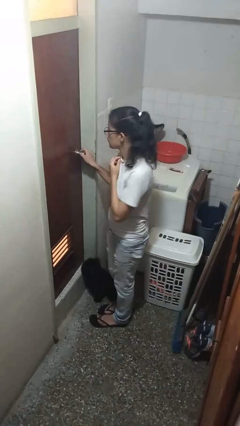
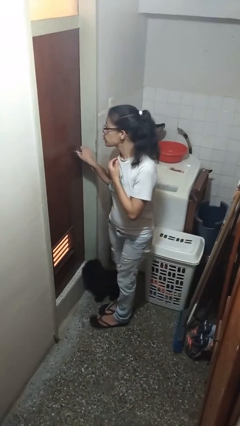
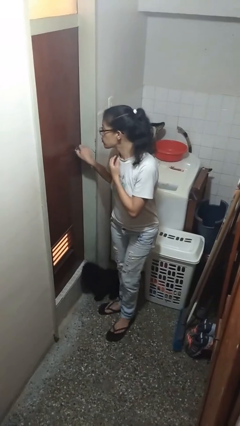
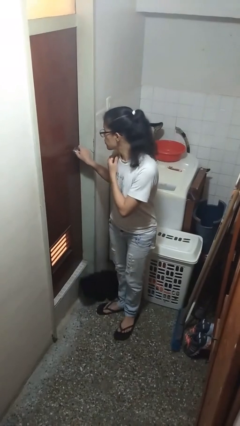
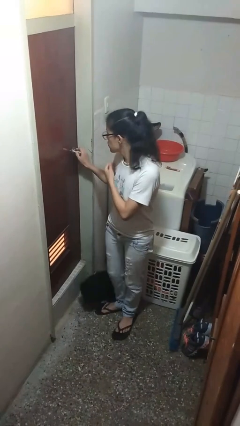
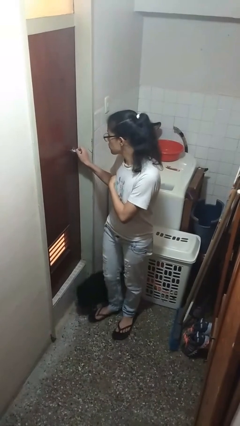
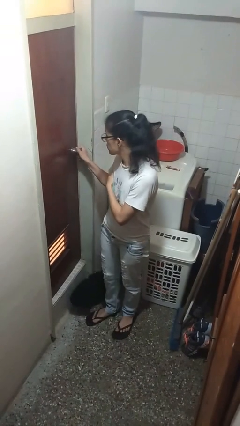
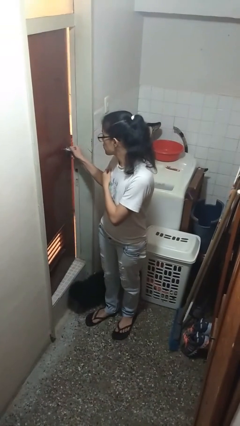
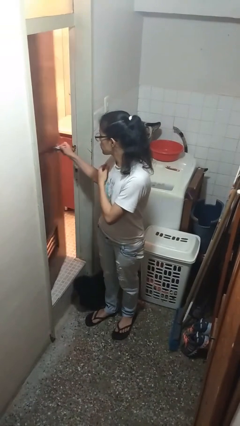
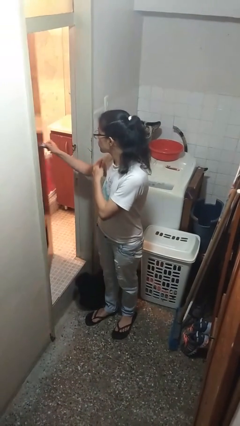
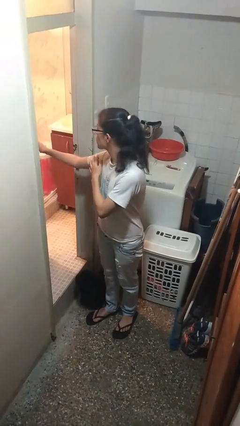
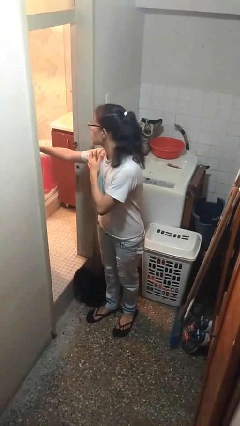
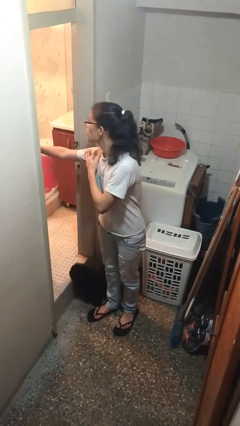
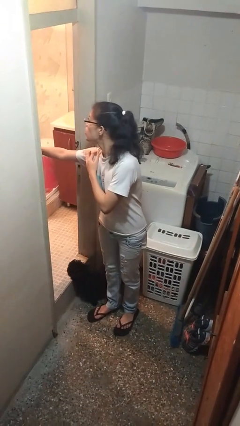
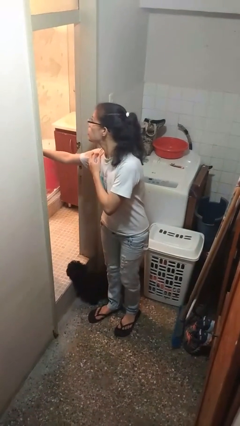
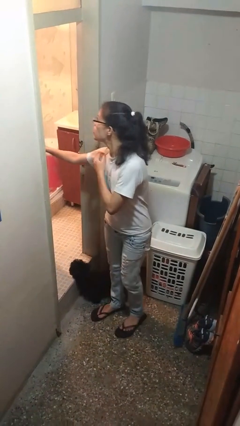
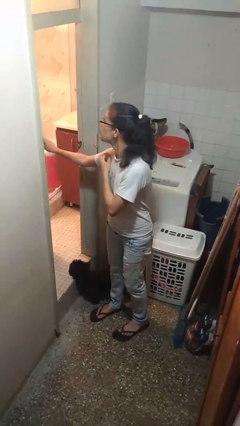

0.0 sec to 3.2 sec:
person opens facility door

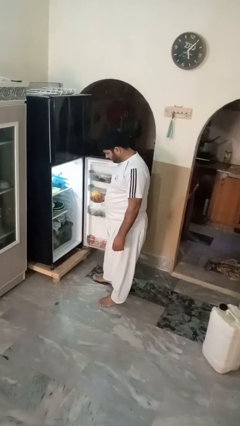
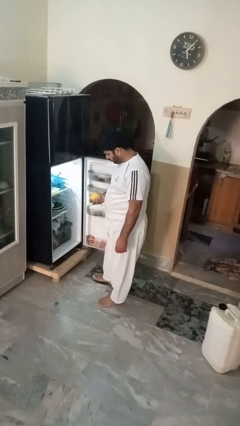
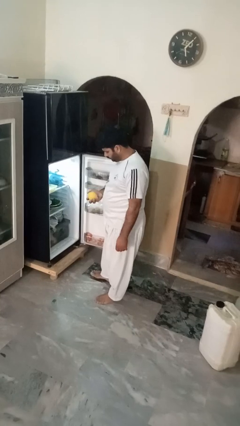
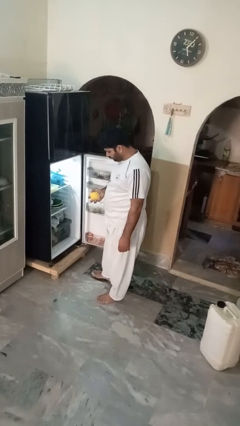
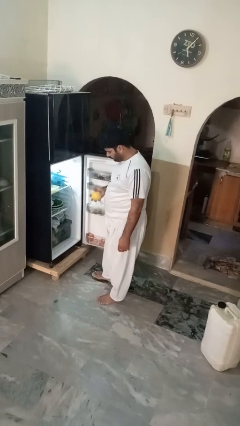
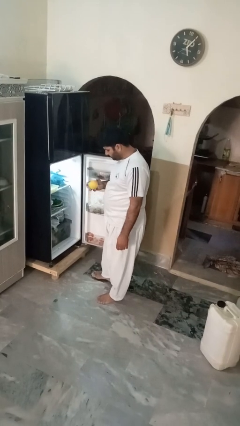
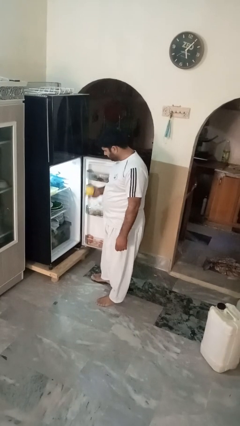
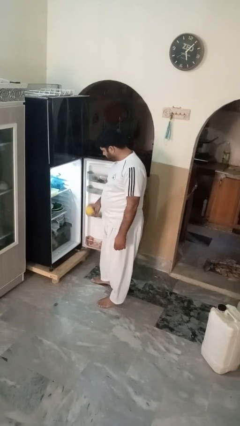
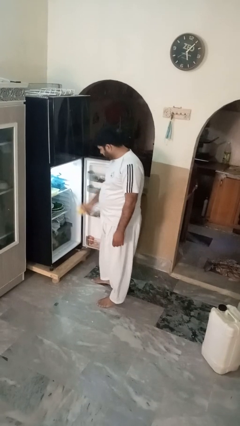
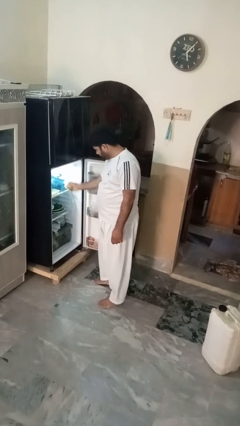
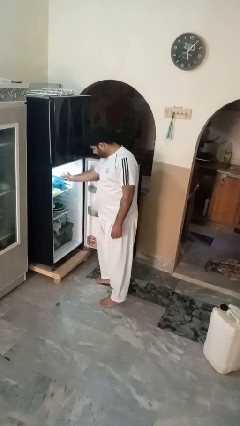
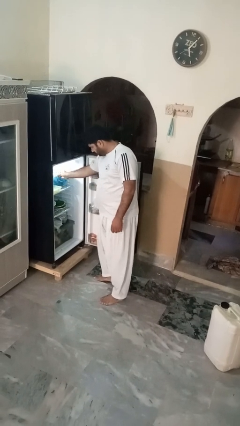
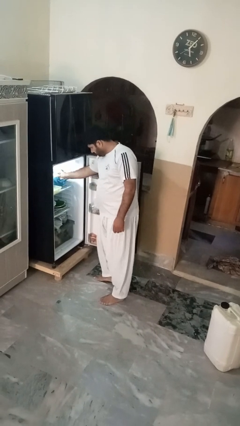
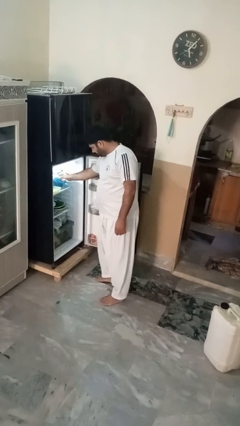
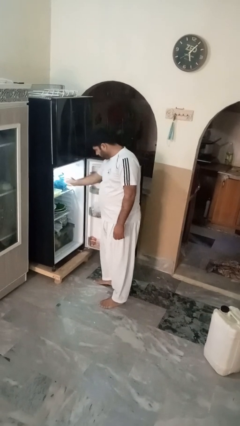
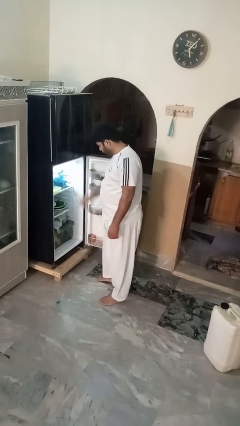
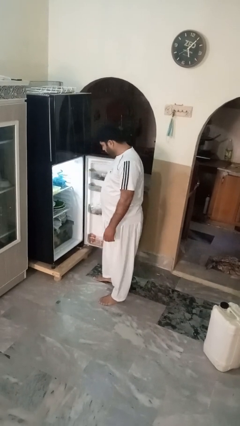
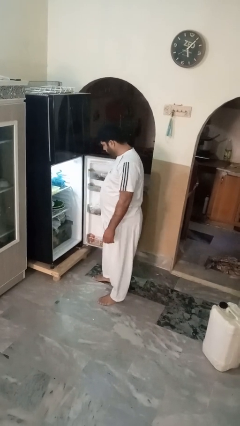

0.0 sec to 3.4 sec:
person puts object into refrigerator

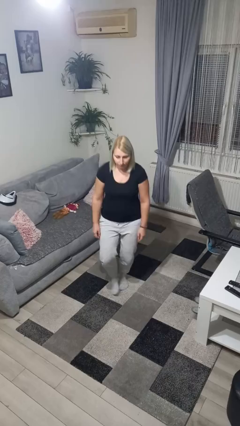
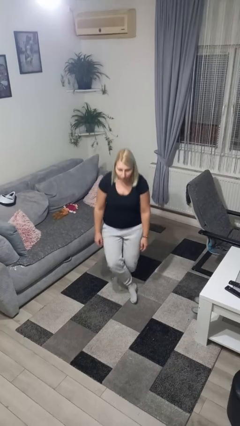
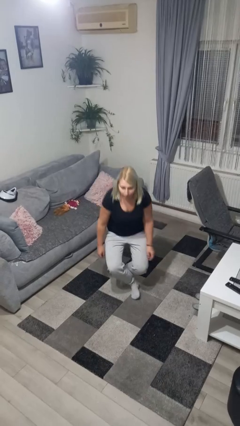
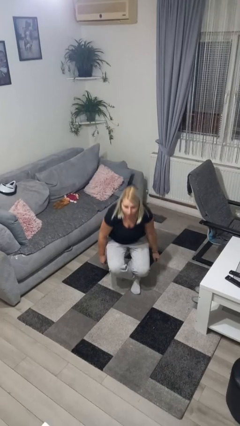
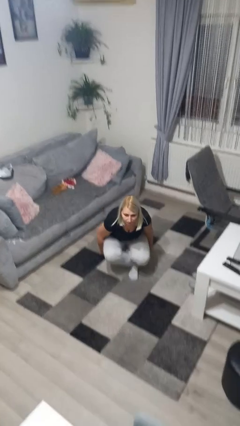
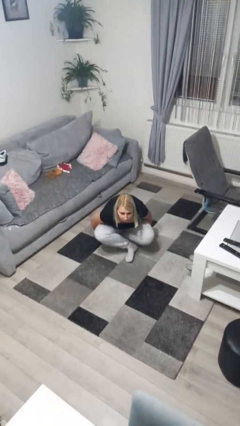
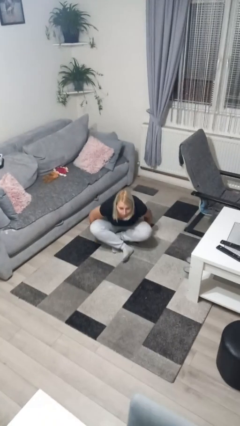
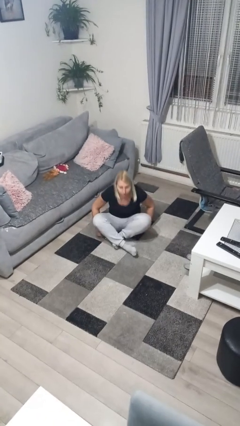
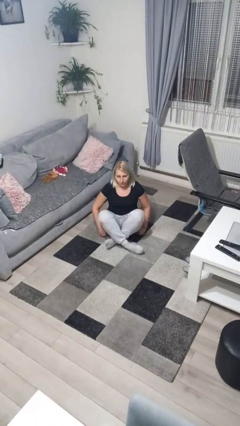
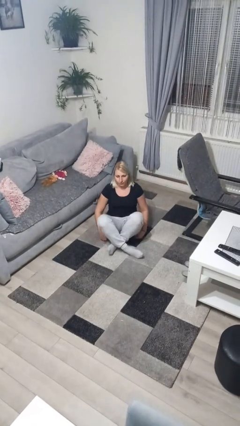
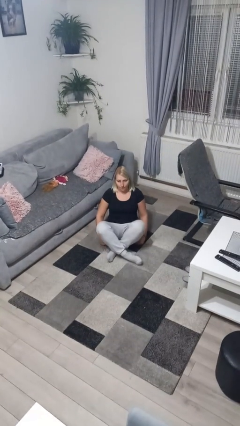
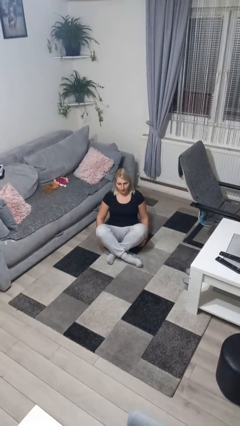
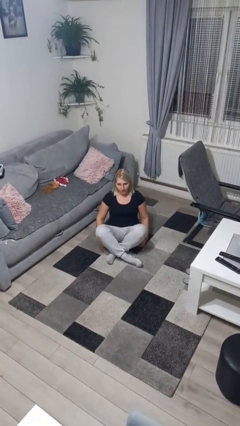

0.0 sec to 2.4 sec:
person sits crisscross

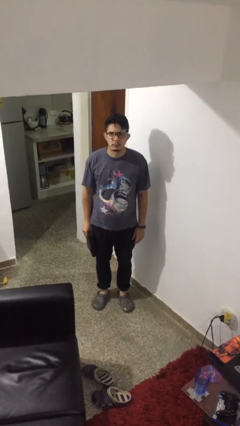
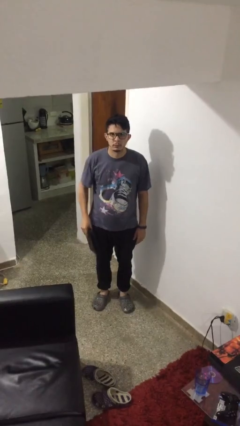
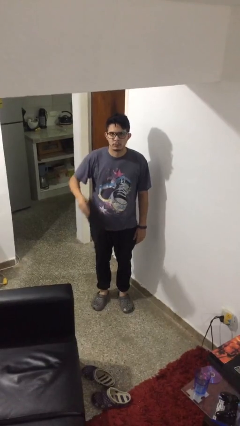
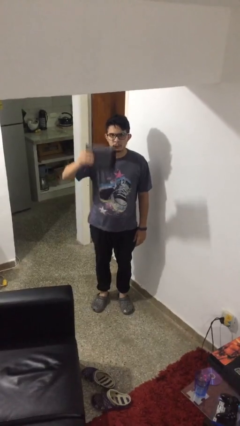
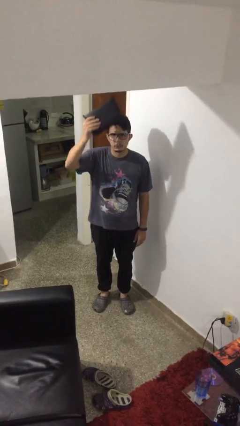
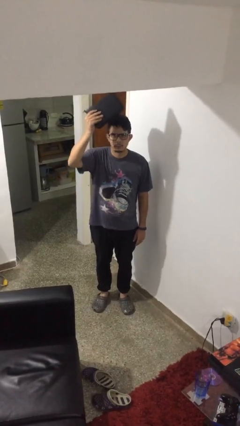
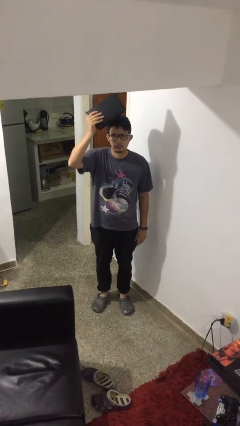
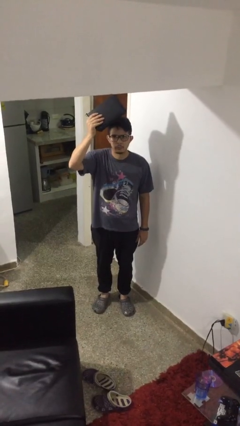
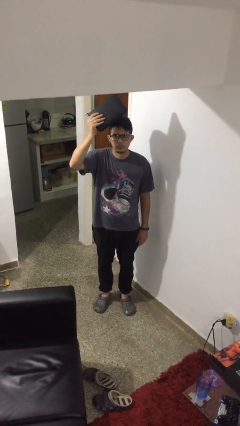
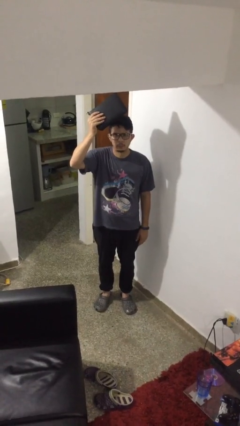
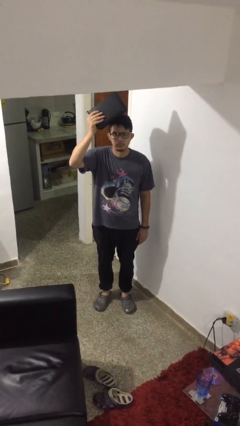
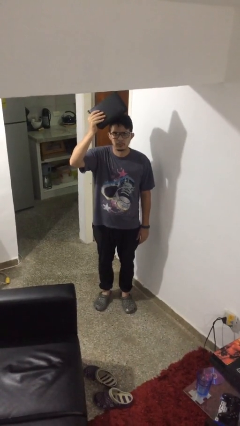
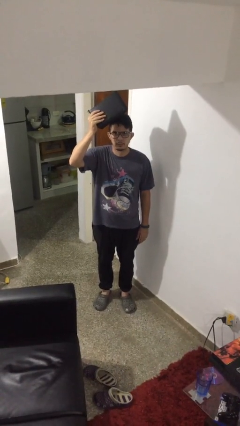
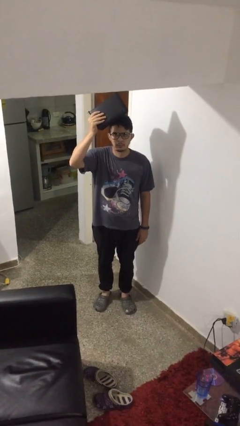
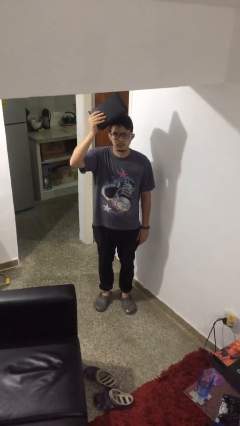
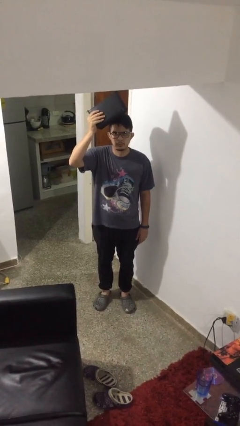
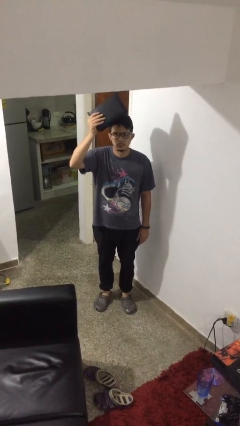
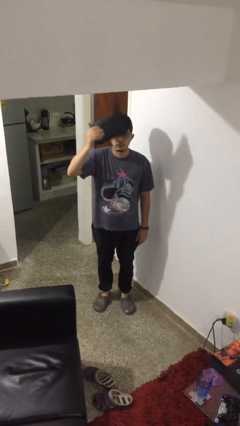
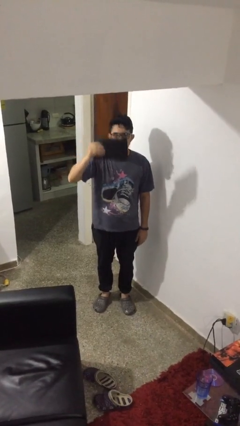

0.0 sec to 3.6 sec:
person holds object above head

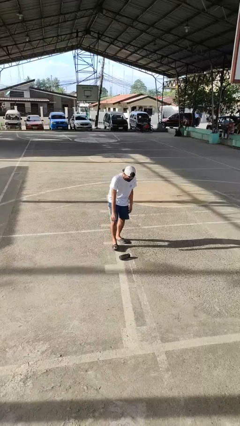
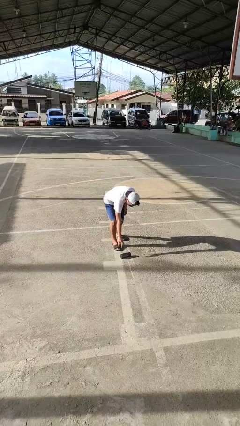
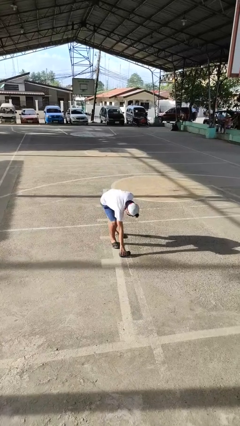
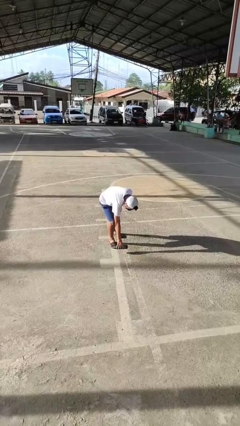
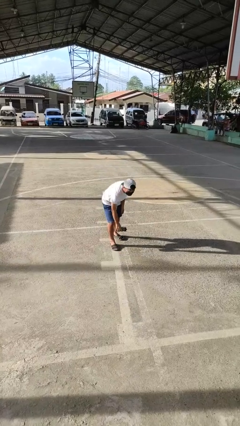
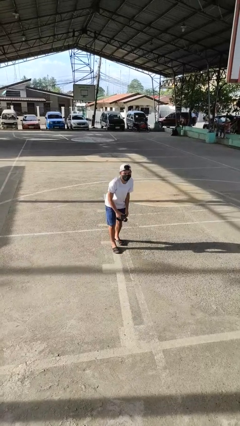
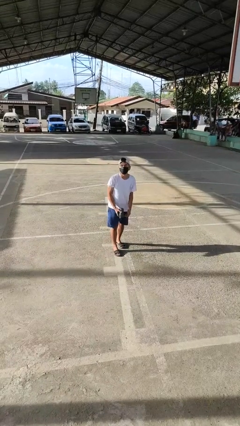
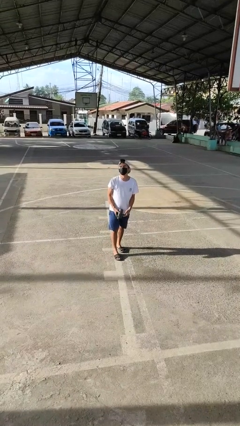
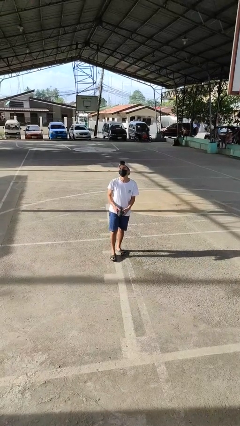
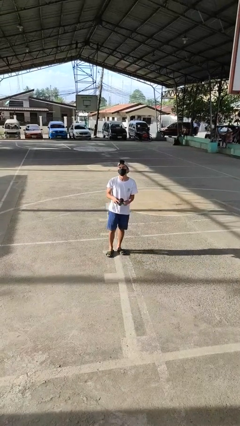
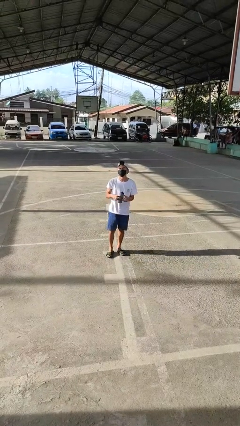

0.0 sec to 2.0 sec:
person picks up object from floor

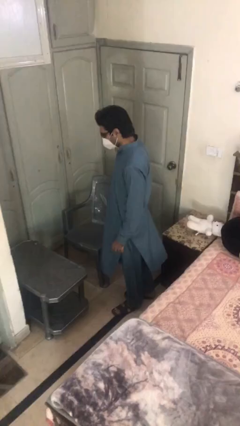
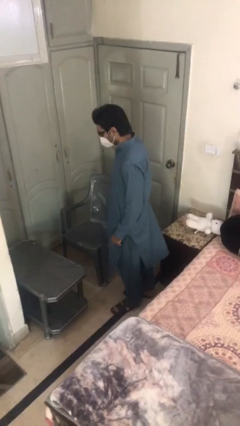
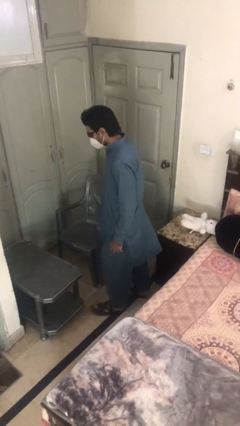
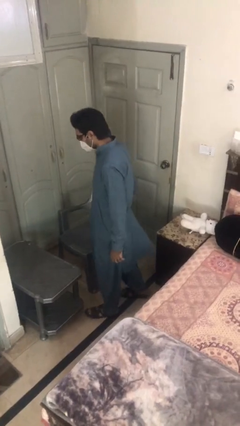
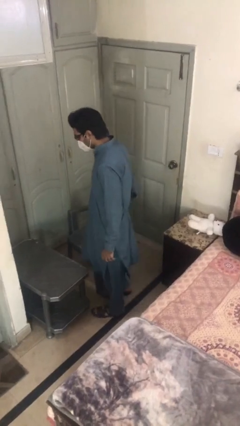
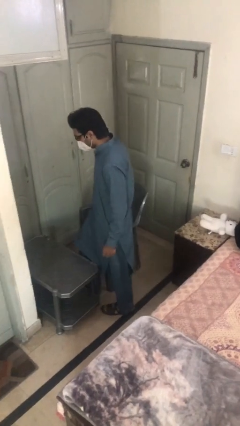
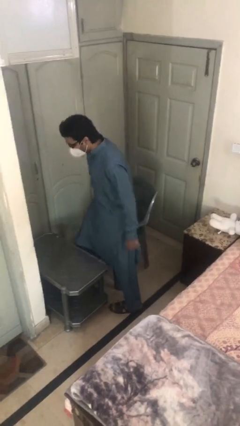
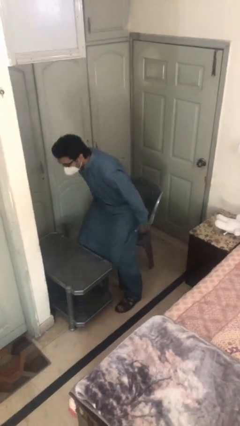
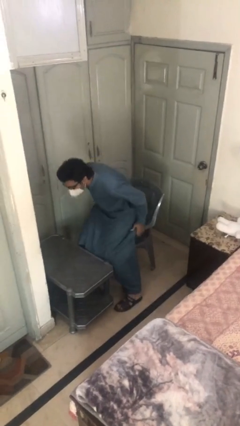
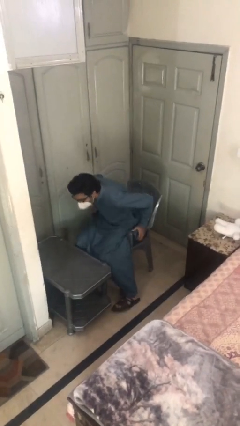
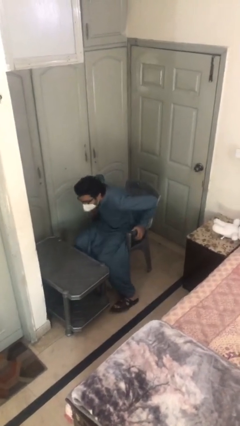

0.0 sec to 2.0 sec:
person sits down

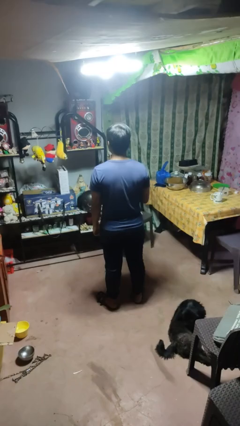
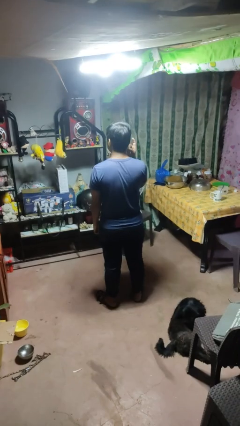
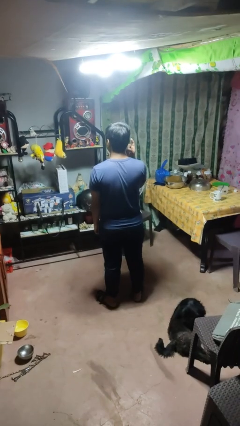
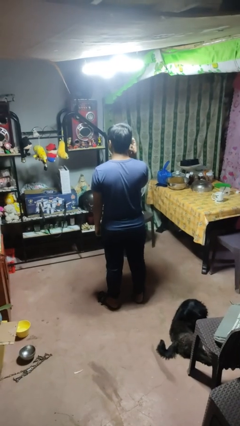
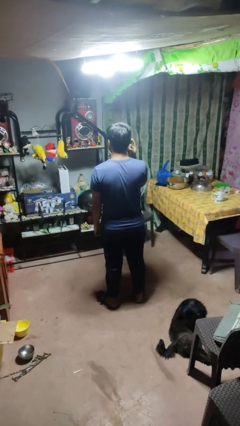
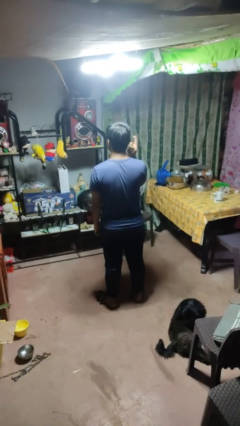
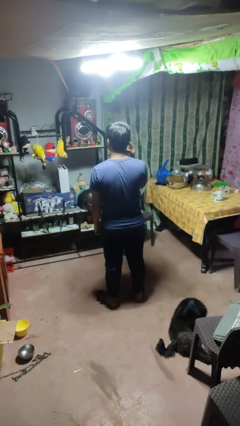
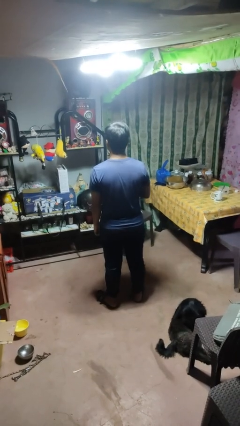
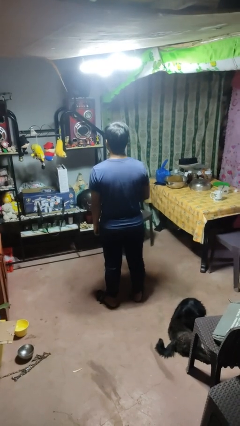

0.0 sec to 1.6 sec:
person gestures listen closely
